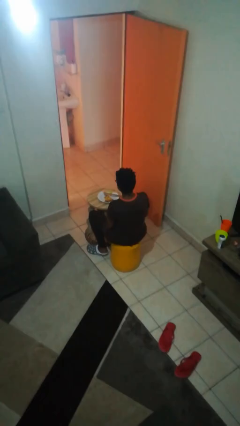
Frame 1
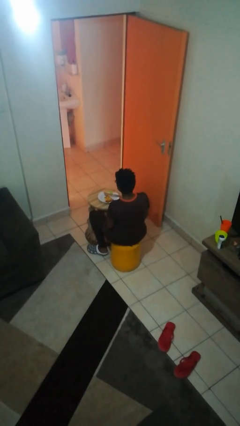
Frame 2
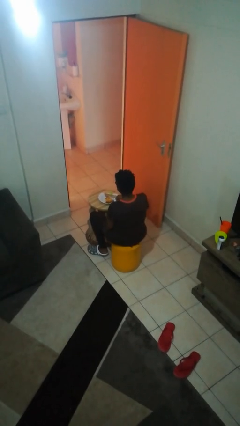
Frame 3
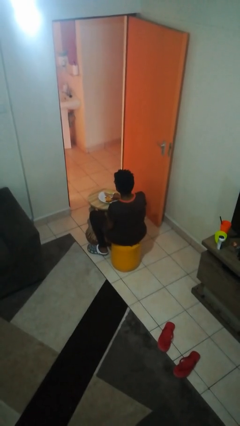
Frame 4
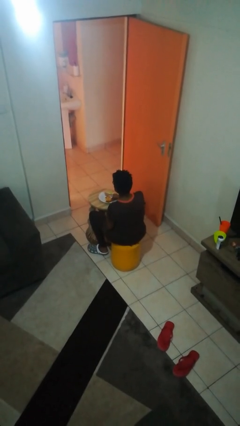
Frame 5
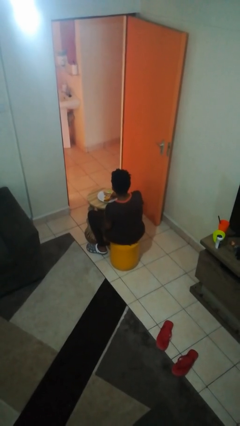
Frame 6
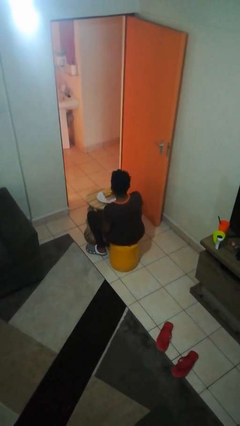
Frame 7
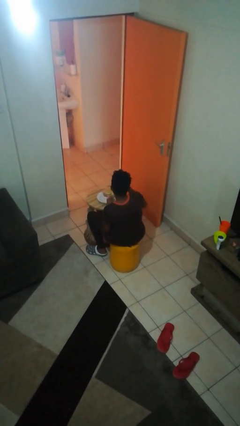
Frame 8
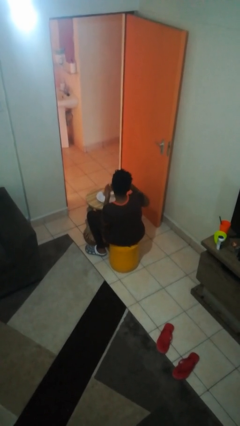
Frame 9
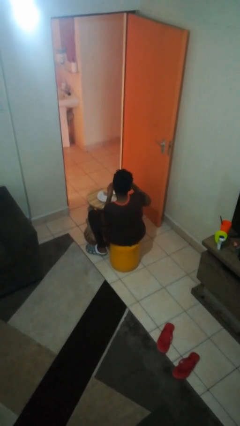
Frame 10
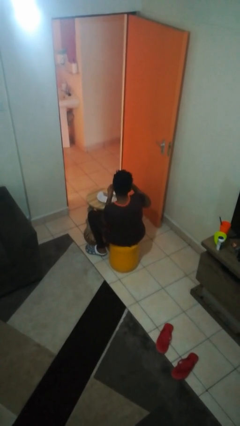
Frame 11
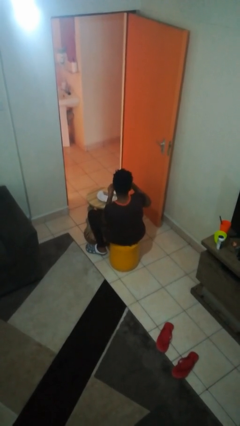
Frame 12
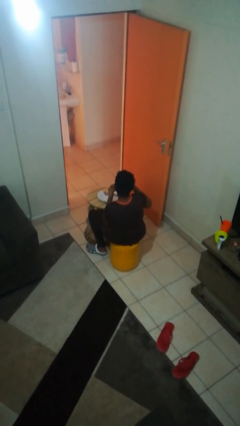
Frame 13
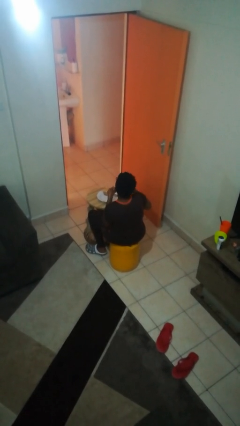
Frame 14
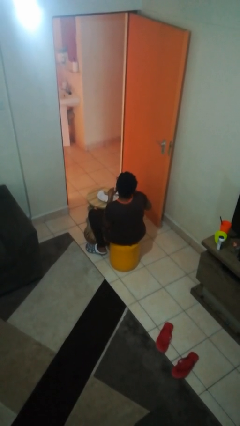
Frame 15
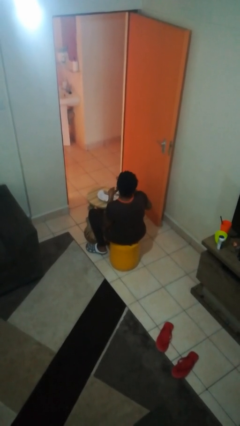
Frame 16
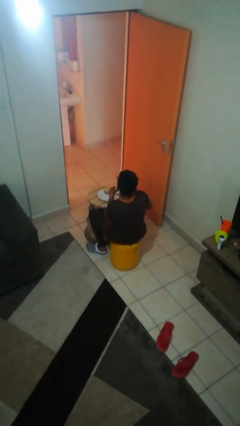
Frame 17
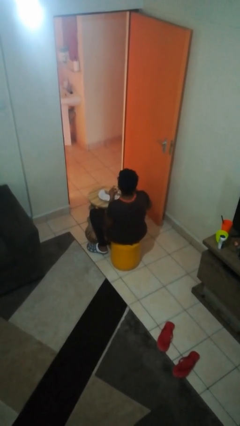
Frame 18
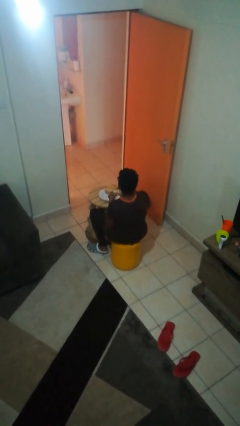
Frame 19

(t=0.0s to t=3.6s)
person eats with hands

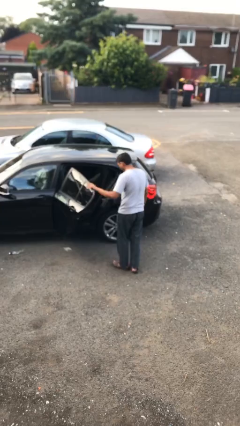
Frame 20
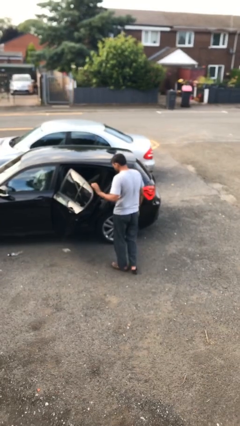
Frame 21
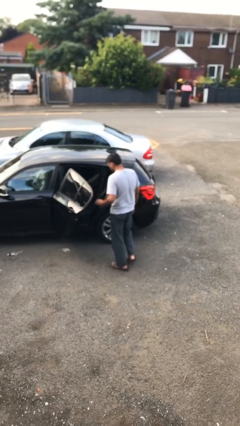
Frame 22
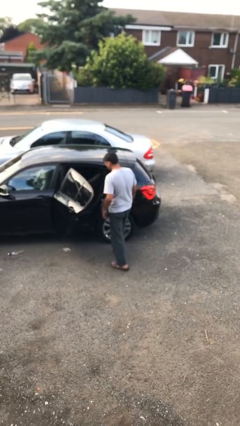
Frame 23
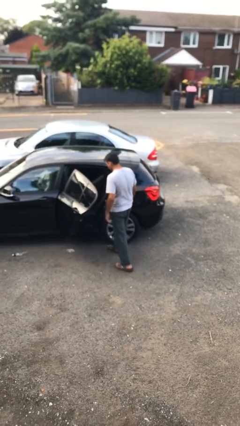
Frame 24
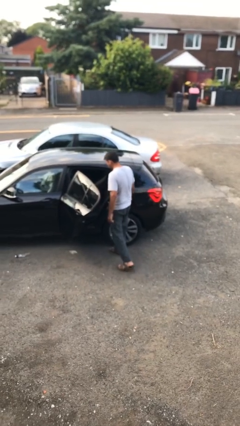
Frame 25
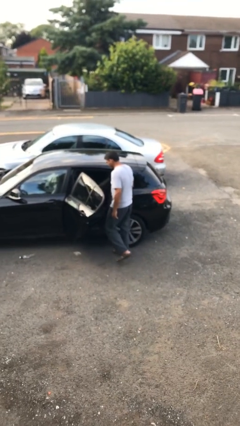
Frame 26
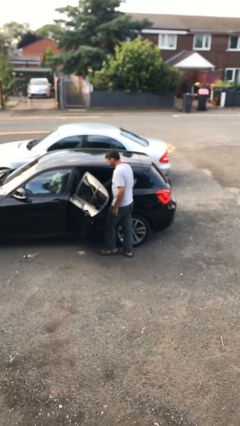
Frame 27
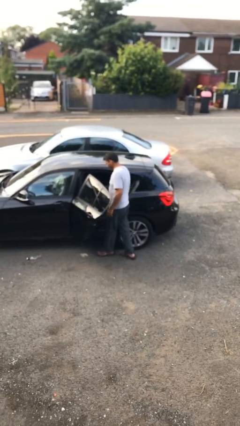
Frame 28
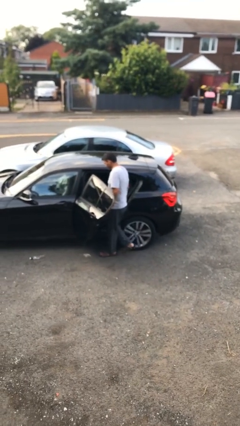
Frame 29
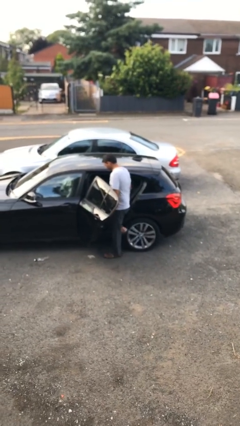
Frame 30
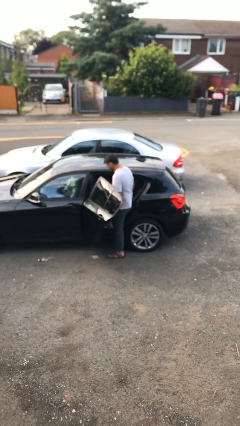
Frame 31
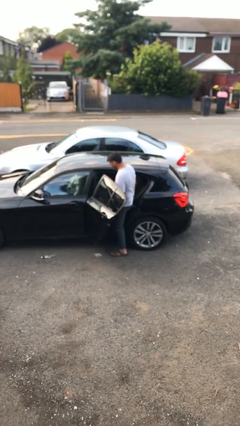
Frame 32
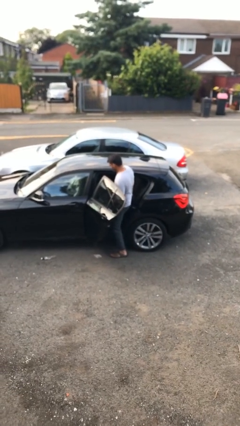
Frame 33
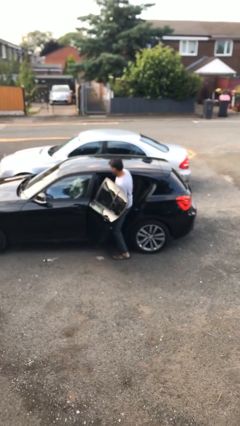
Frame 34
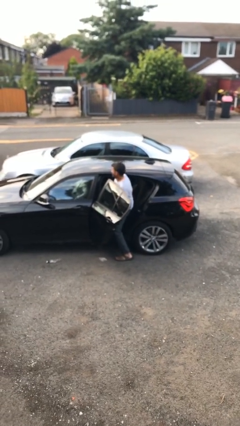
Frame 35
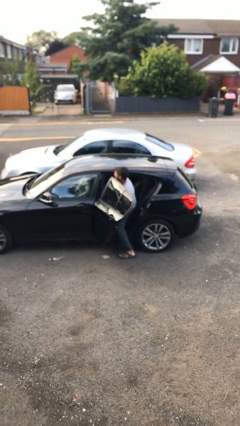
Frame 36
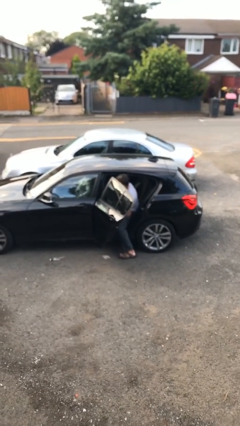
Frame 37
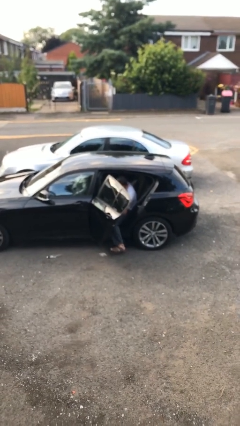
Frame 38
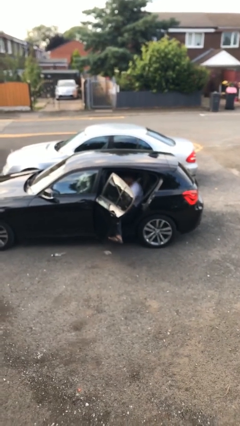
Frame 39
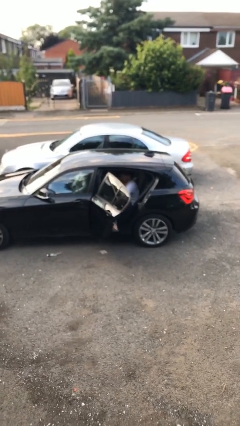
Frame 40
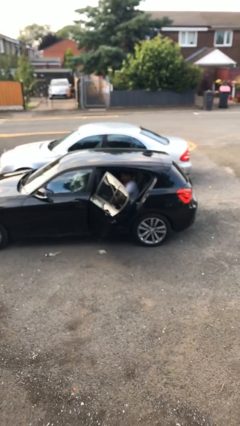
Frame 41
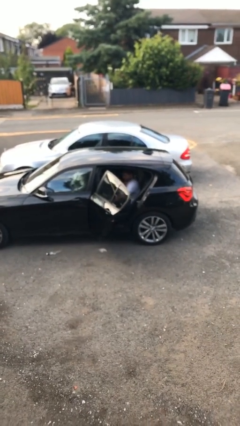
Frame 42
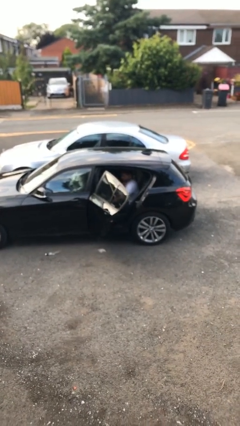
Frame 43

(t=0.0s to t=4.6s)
person enters car

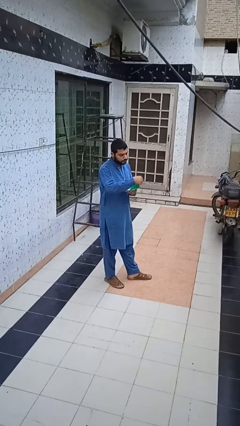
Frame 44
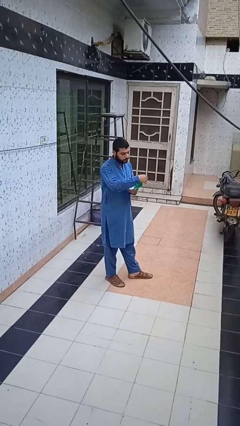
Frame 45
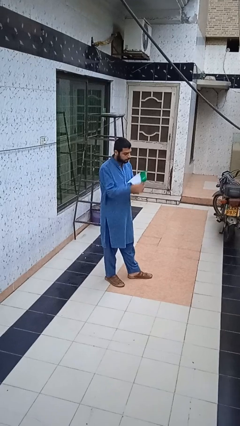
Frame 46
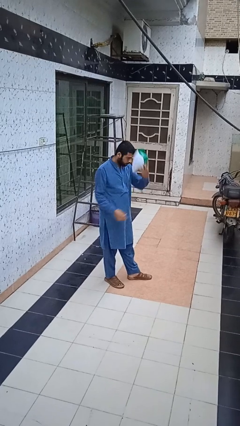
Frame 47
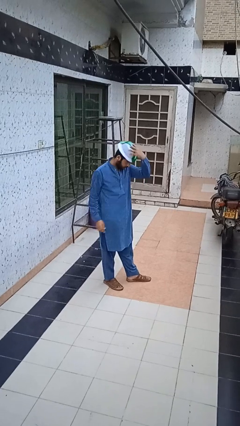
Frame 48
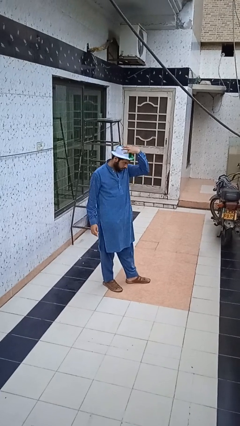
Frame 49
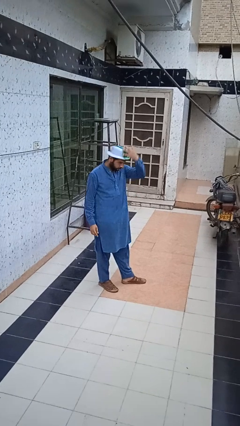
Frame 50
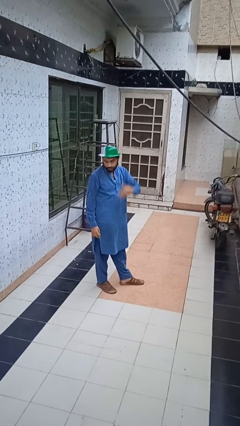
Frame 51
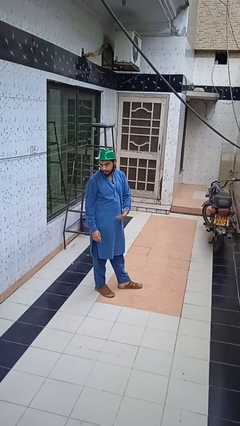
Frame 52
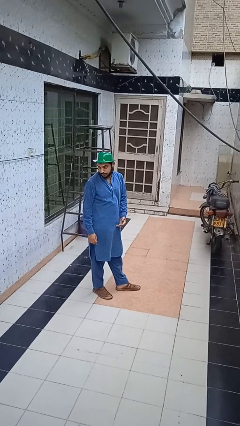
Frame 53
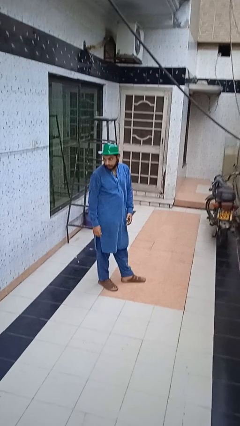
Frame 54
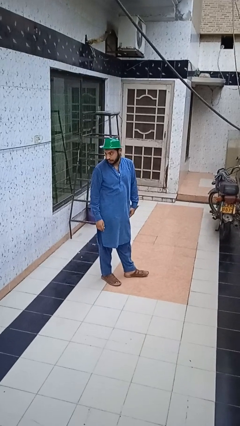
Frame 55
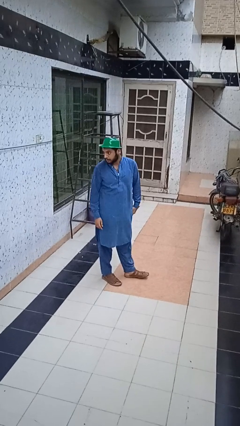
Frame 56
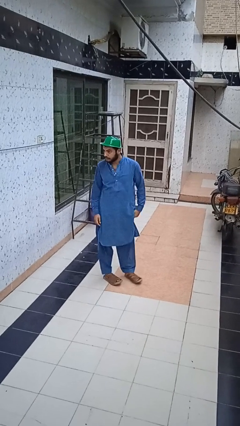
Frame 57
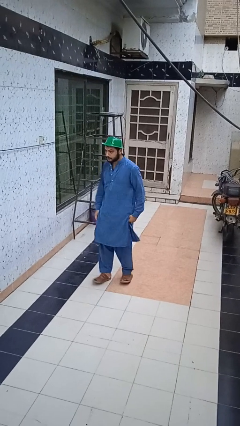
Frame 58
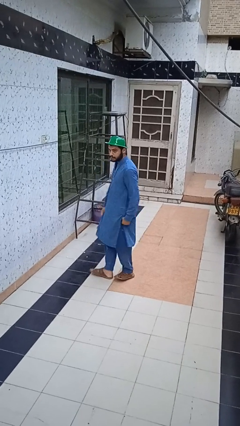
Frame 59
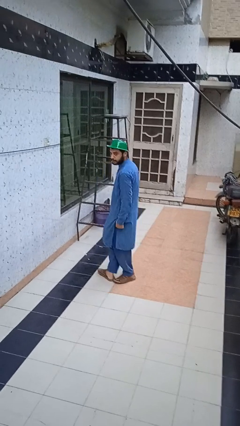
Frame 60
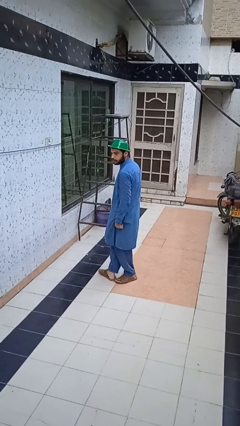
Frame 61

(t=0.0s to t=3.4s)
person puts on hat

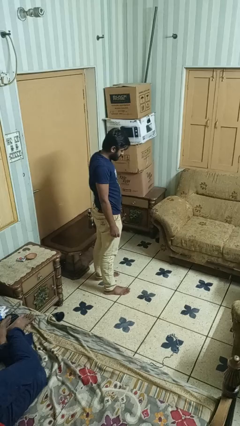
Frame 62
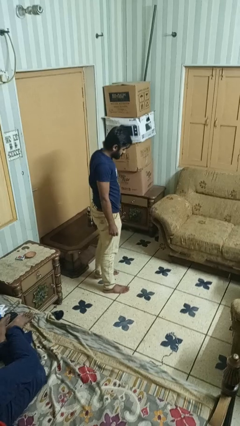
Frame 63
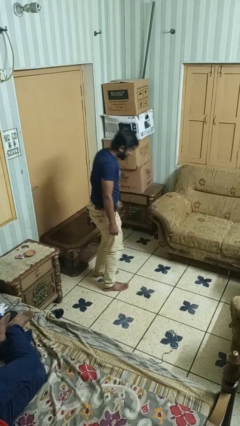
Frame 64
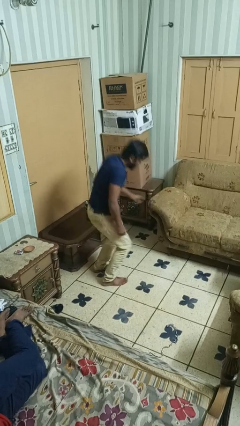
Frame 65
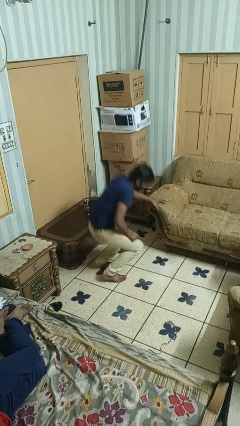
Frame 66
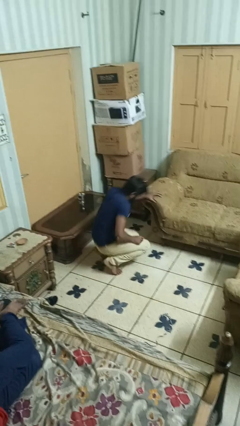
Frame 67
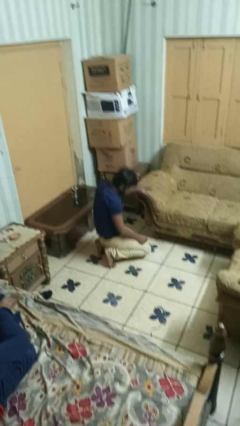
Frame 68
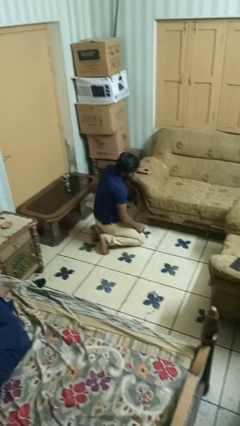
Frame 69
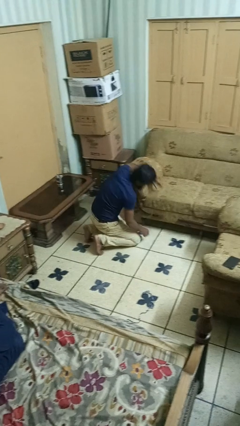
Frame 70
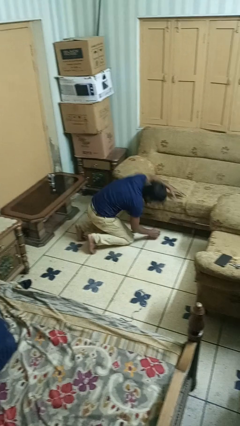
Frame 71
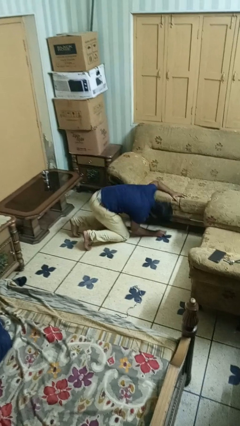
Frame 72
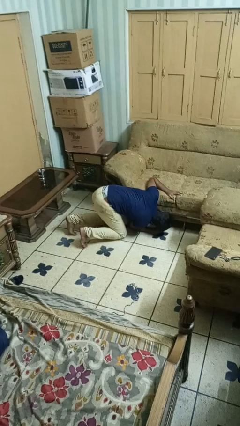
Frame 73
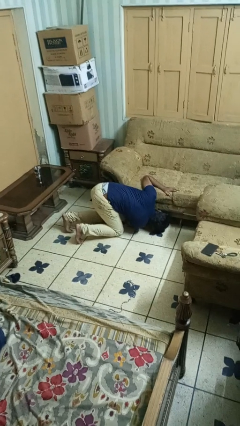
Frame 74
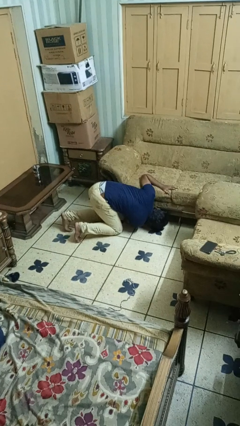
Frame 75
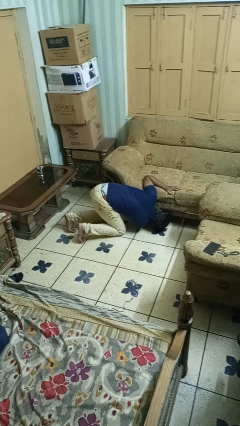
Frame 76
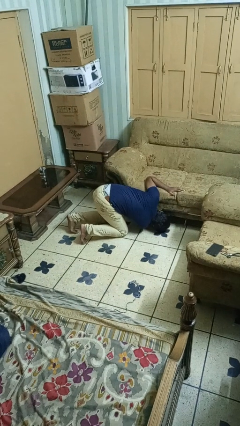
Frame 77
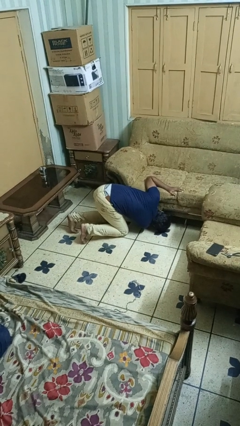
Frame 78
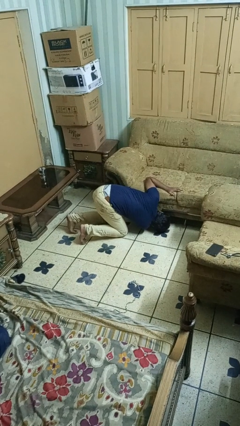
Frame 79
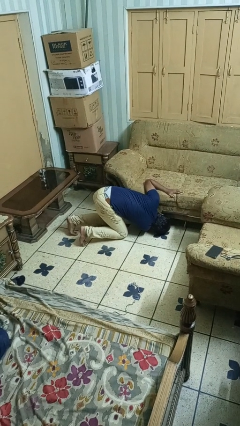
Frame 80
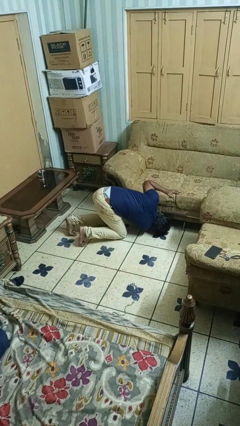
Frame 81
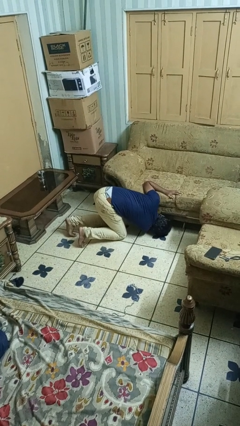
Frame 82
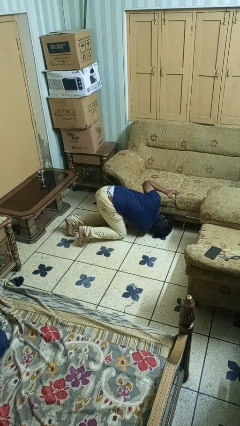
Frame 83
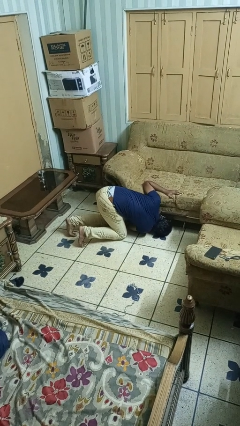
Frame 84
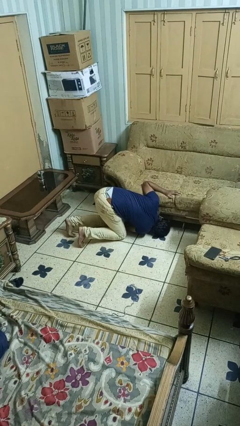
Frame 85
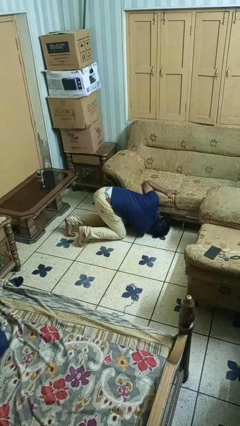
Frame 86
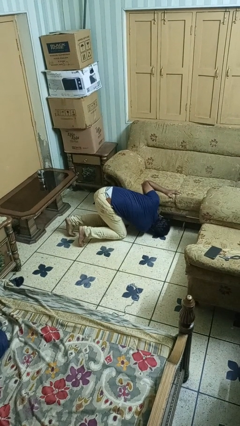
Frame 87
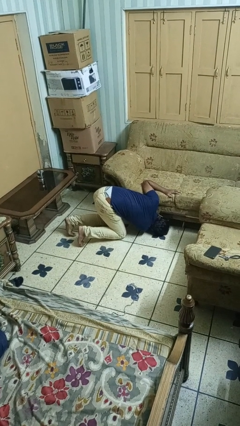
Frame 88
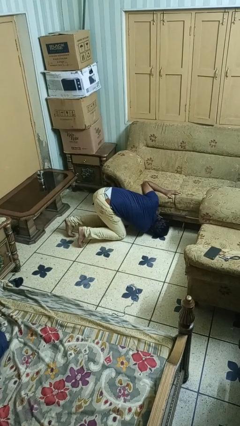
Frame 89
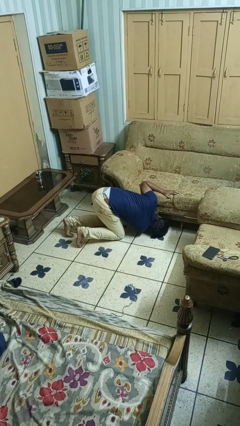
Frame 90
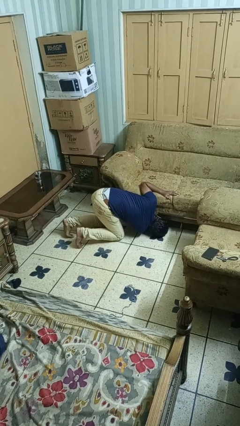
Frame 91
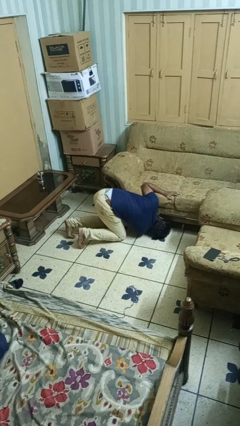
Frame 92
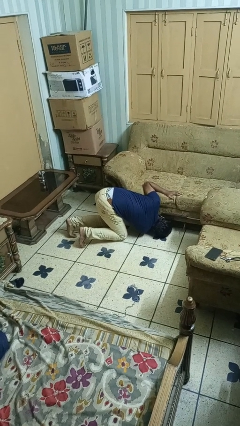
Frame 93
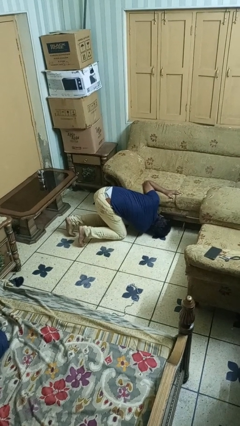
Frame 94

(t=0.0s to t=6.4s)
person searches under couch
